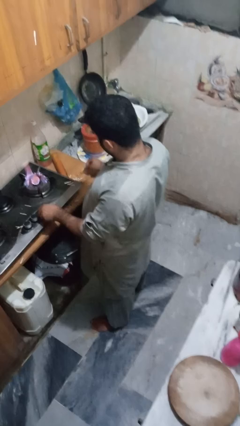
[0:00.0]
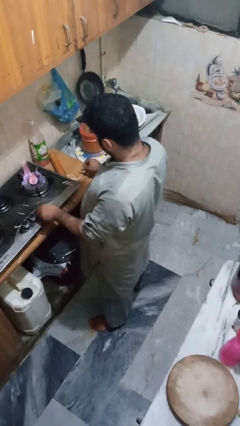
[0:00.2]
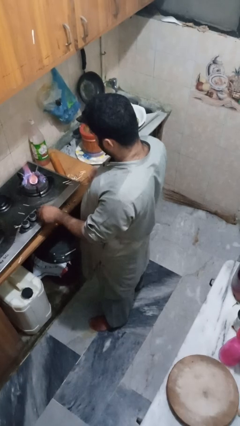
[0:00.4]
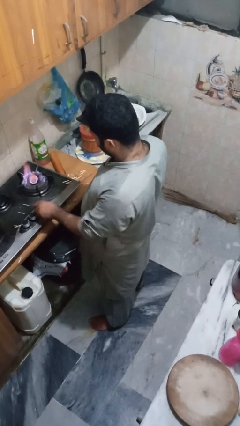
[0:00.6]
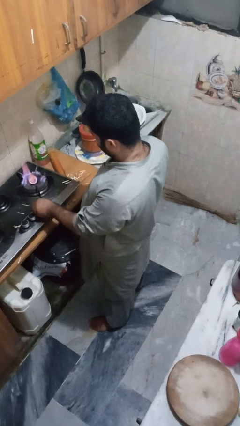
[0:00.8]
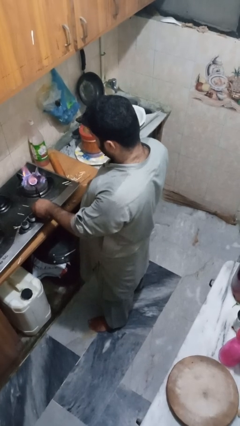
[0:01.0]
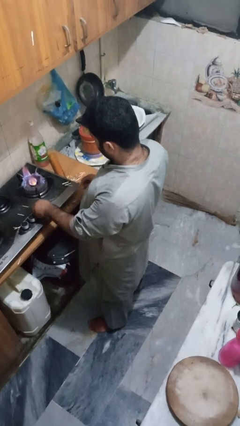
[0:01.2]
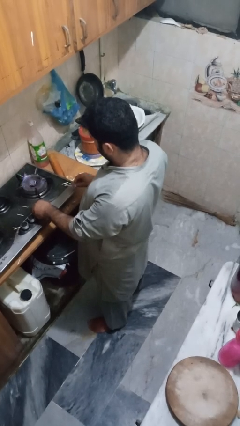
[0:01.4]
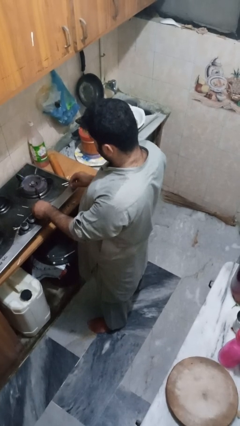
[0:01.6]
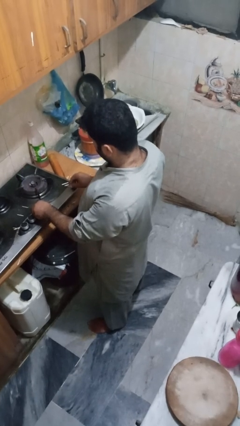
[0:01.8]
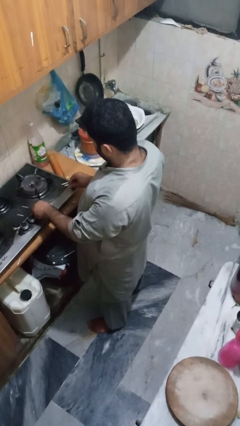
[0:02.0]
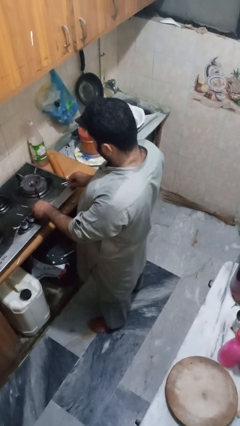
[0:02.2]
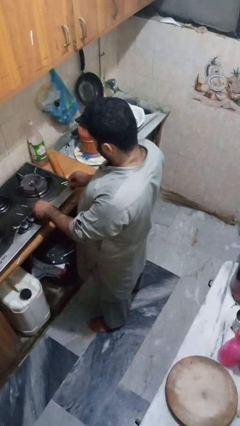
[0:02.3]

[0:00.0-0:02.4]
person turns off stovetop

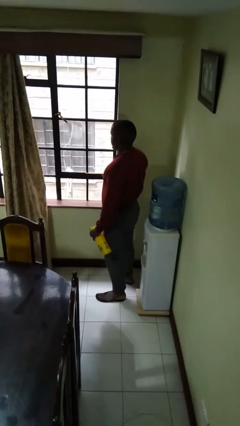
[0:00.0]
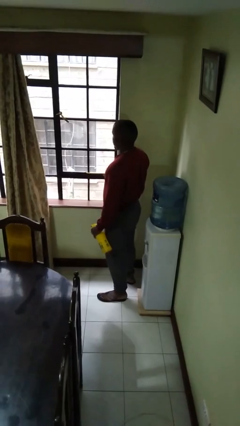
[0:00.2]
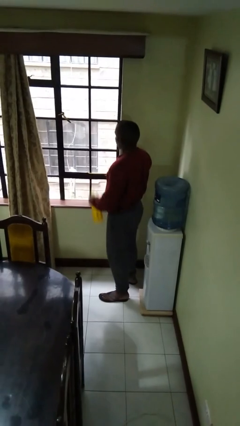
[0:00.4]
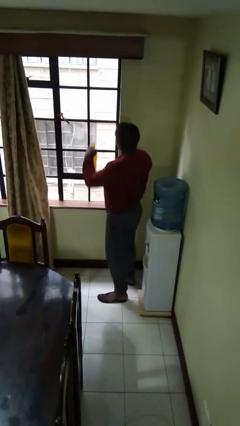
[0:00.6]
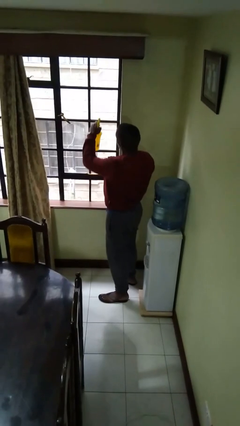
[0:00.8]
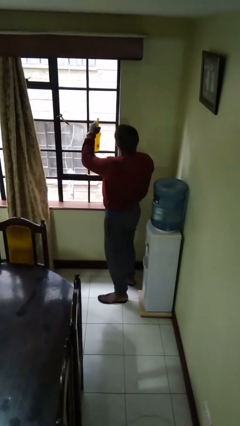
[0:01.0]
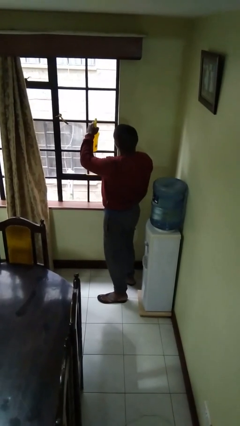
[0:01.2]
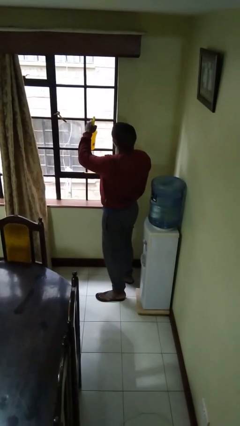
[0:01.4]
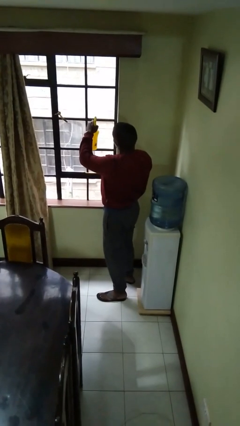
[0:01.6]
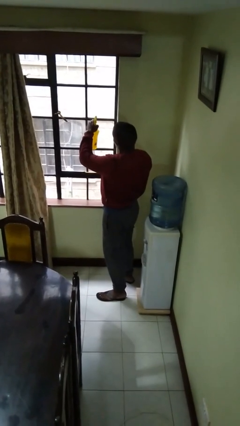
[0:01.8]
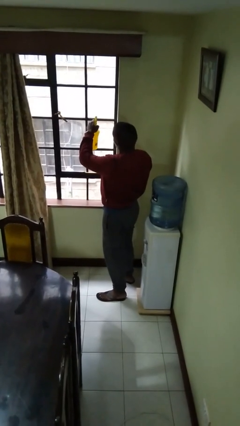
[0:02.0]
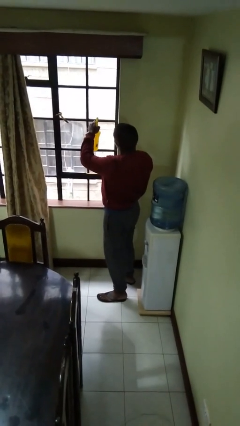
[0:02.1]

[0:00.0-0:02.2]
person sprays from bottle

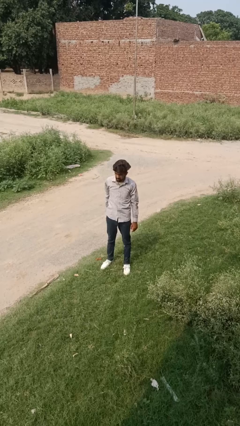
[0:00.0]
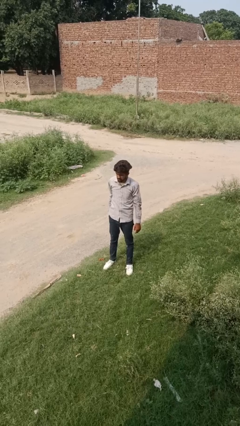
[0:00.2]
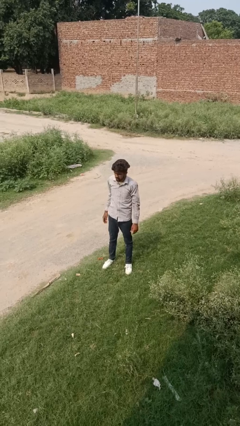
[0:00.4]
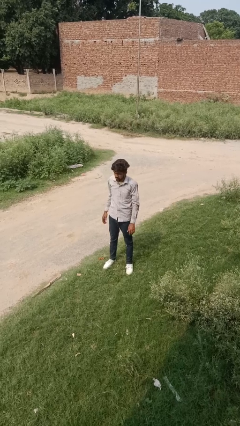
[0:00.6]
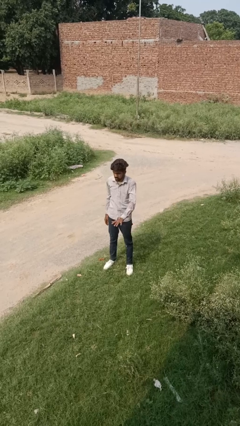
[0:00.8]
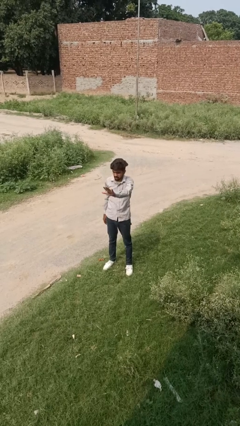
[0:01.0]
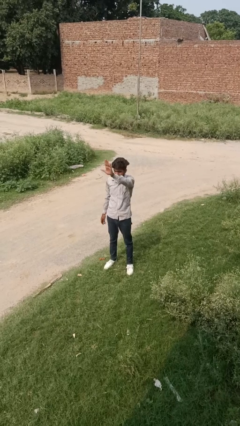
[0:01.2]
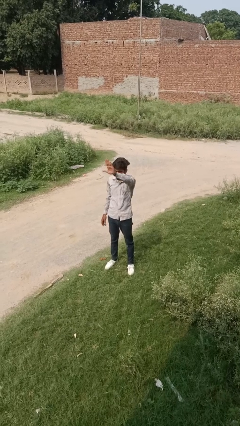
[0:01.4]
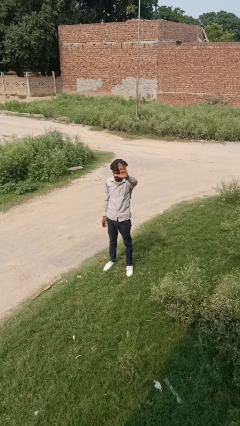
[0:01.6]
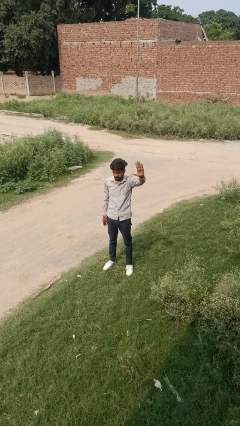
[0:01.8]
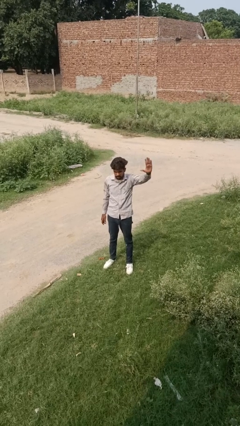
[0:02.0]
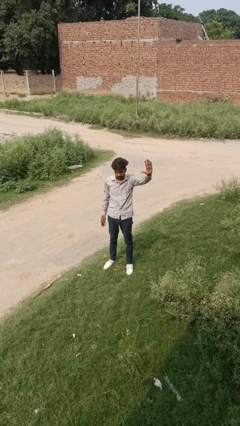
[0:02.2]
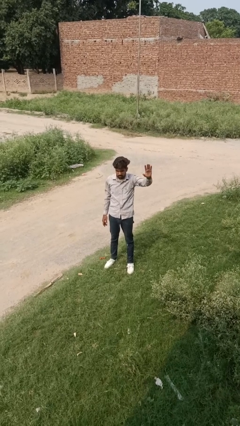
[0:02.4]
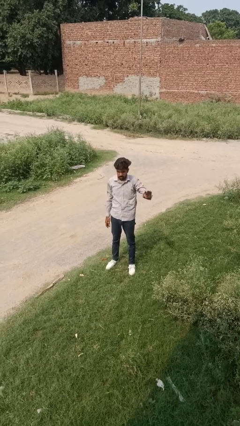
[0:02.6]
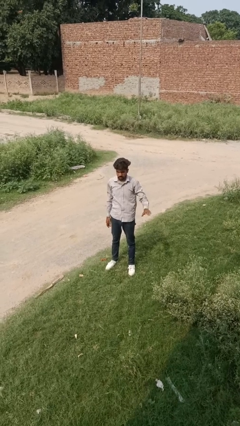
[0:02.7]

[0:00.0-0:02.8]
person gestures swipe left

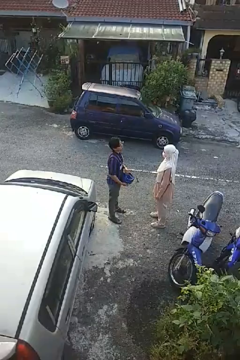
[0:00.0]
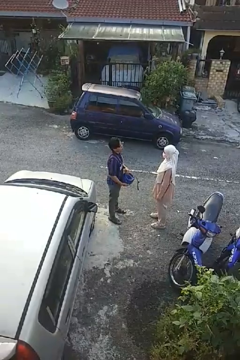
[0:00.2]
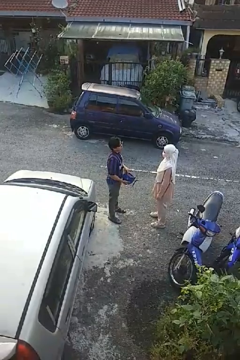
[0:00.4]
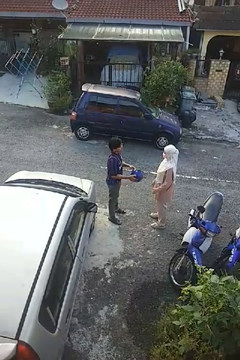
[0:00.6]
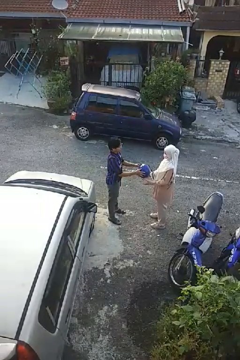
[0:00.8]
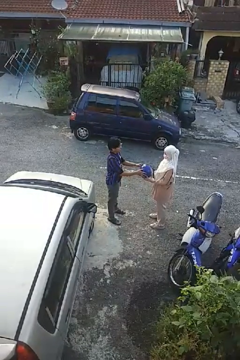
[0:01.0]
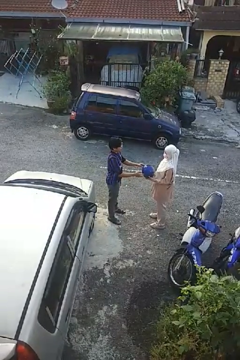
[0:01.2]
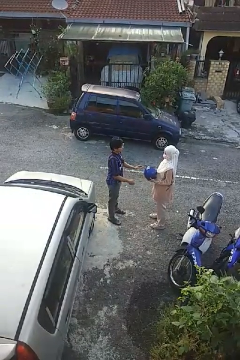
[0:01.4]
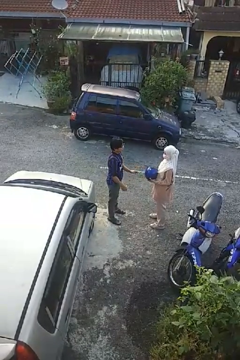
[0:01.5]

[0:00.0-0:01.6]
person transfers object to person

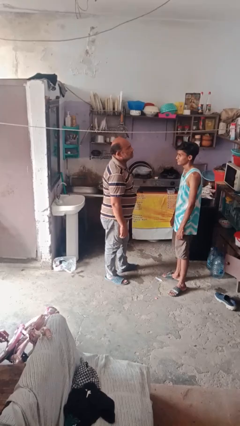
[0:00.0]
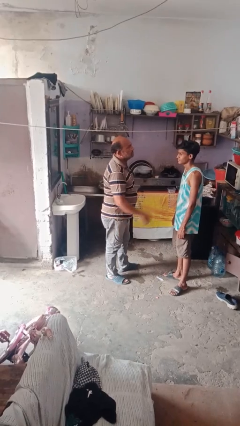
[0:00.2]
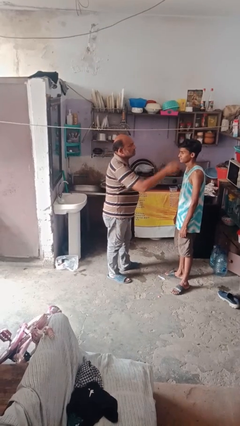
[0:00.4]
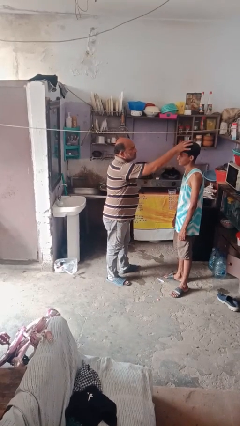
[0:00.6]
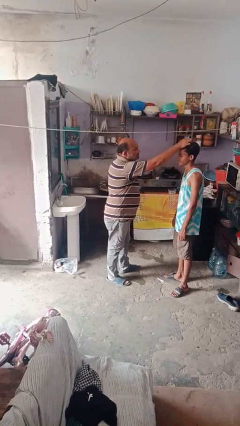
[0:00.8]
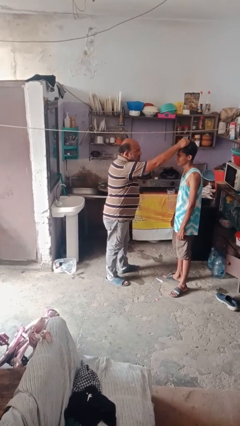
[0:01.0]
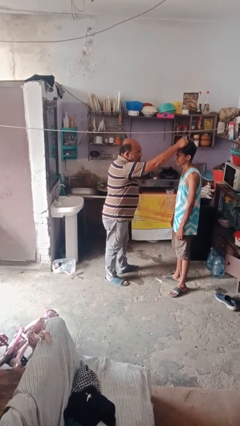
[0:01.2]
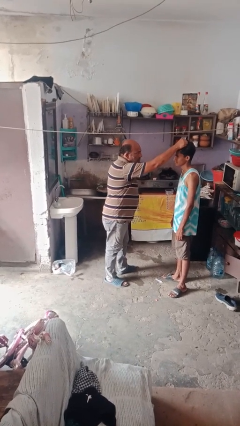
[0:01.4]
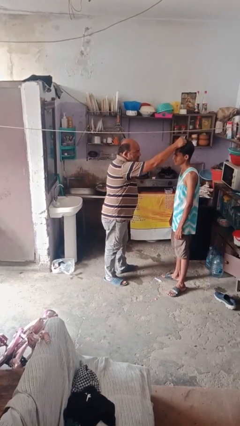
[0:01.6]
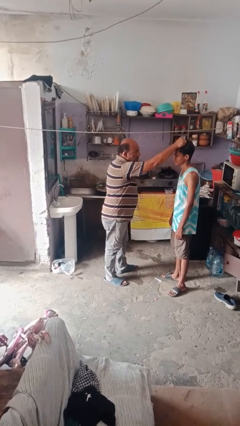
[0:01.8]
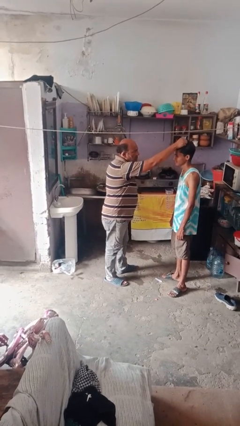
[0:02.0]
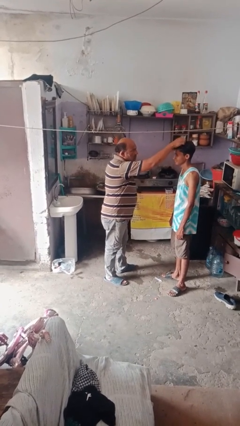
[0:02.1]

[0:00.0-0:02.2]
person grabs person by hair

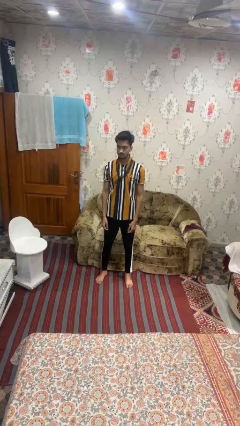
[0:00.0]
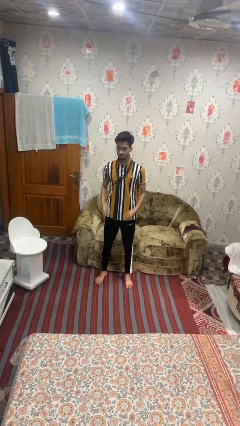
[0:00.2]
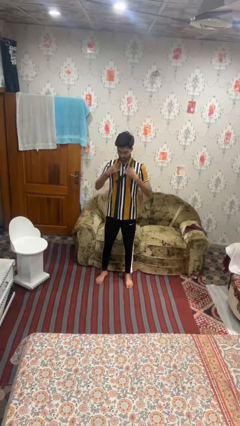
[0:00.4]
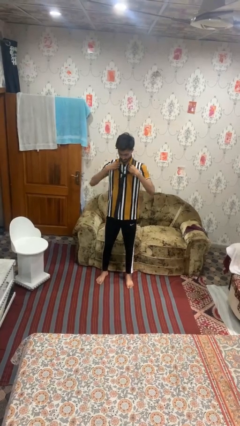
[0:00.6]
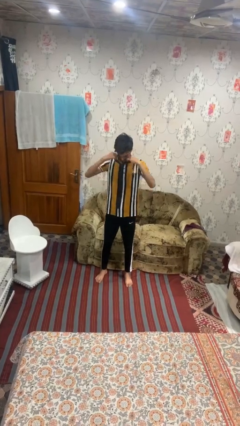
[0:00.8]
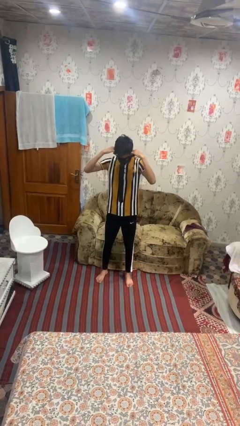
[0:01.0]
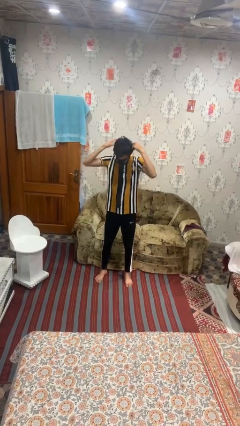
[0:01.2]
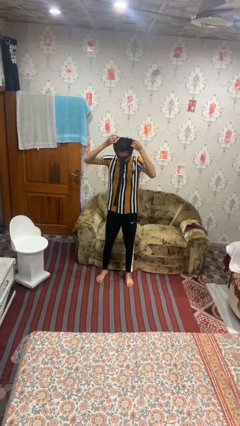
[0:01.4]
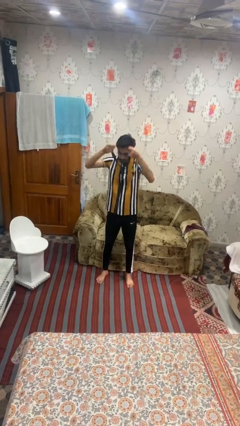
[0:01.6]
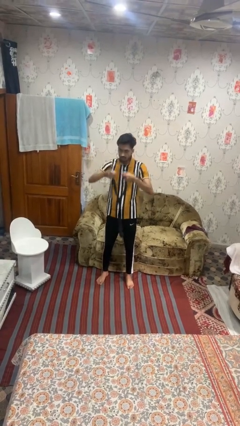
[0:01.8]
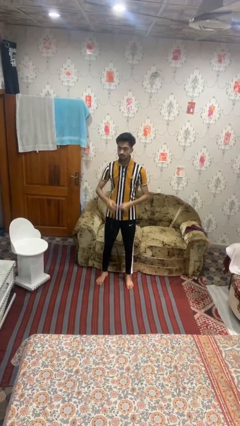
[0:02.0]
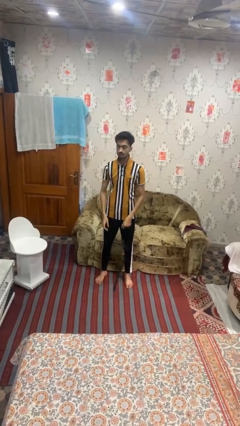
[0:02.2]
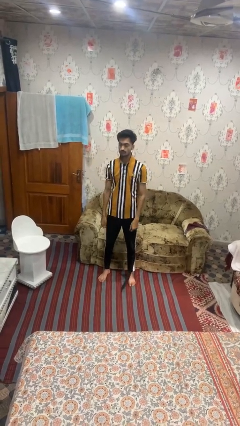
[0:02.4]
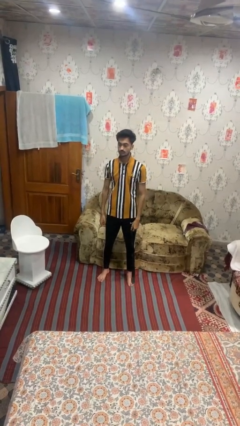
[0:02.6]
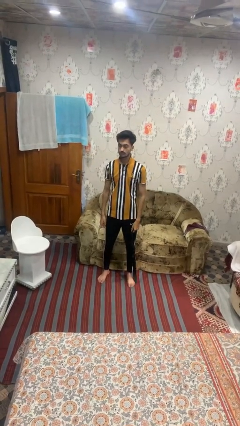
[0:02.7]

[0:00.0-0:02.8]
person takes off necktie

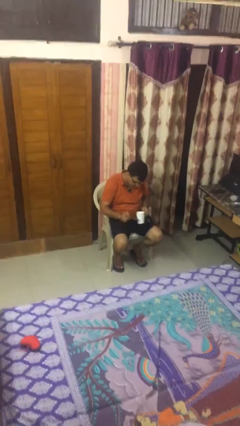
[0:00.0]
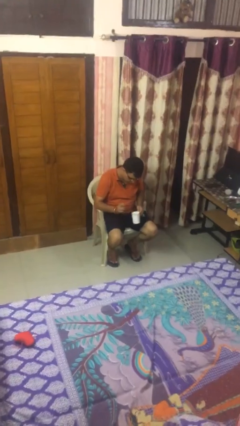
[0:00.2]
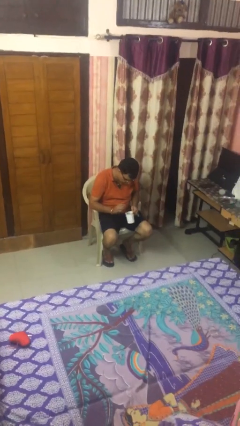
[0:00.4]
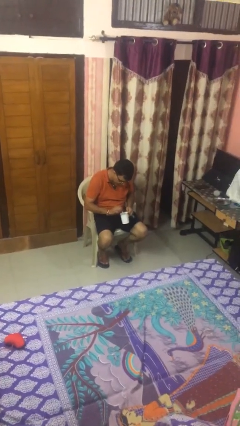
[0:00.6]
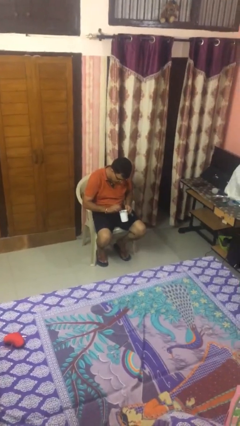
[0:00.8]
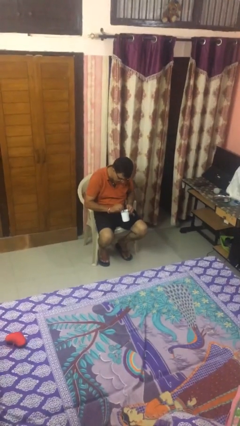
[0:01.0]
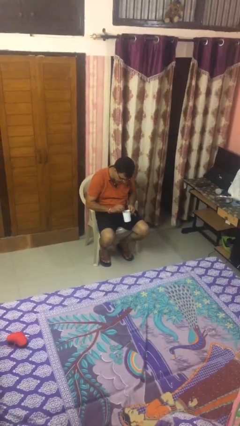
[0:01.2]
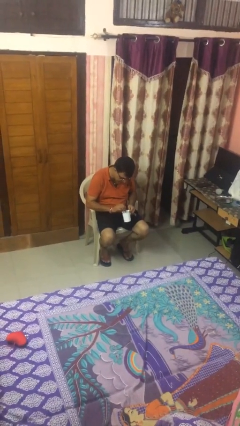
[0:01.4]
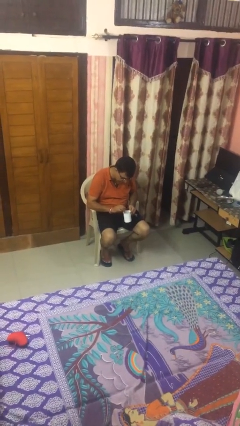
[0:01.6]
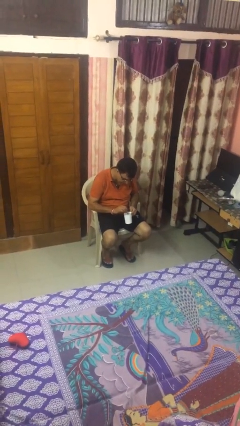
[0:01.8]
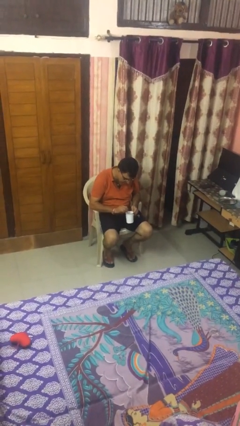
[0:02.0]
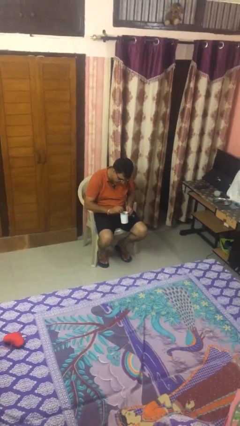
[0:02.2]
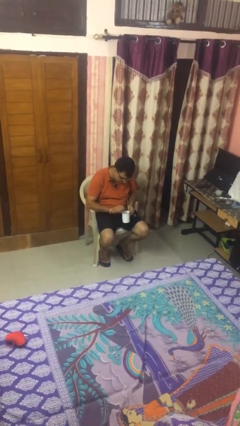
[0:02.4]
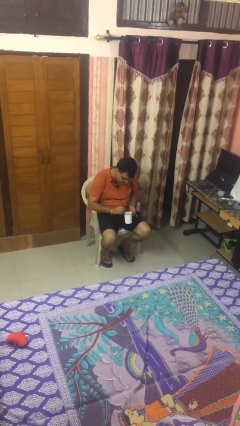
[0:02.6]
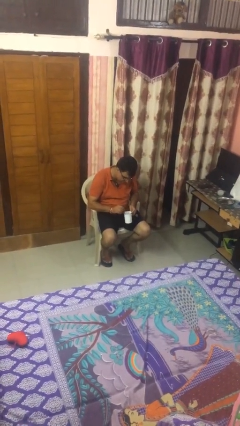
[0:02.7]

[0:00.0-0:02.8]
person stirs mug

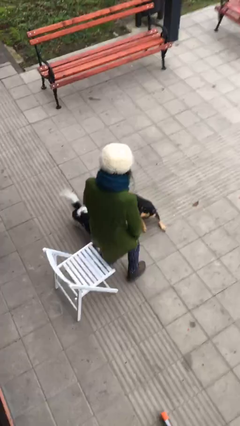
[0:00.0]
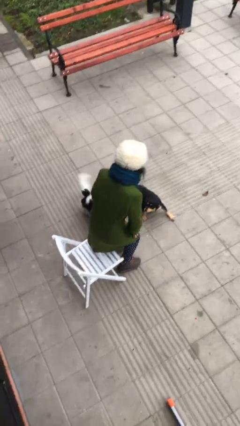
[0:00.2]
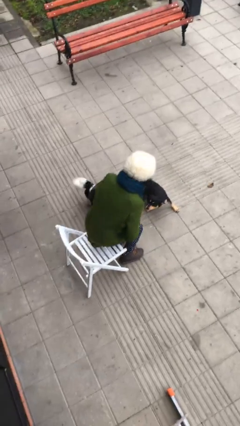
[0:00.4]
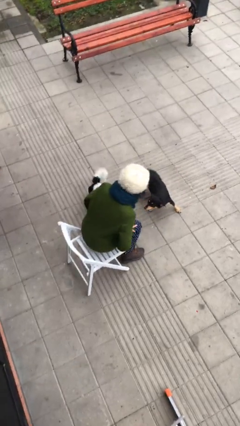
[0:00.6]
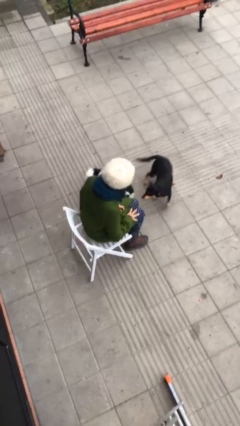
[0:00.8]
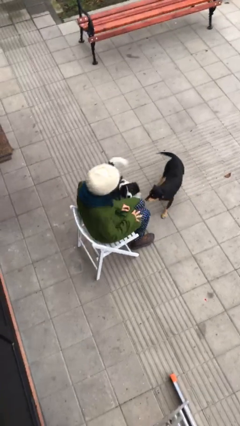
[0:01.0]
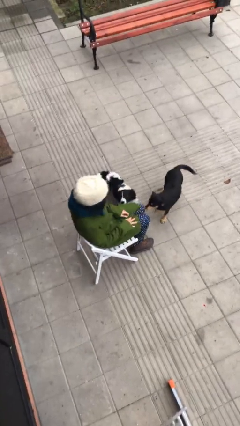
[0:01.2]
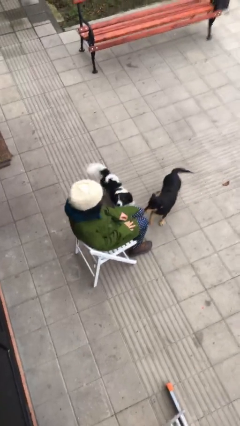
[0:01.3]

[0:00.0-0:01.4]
person sits down
